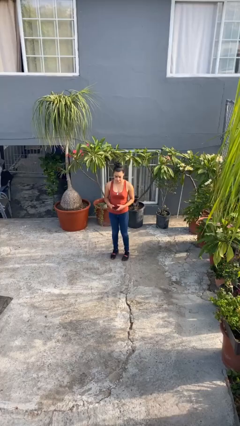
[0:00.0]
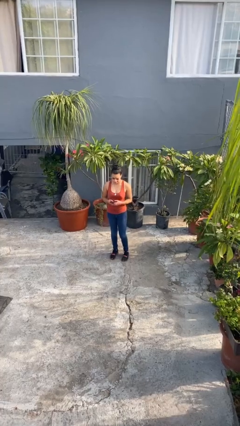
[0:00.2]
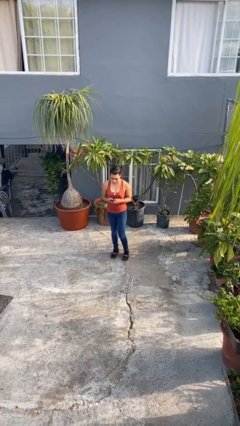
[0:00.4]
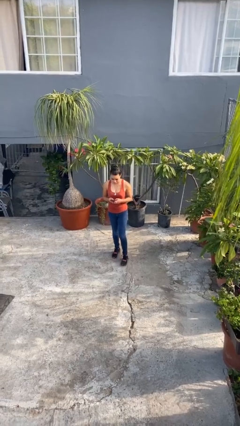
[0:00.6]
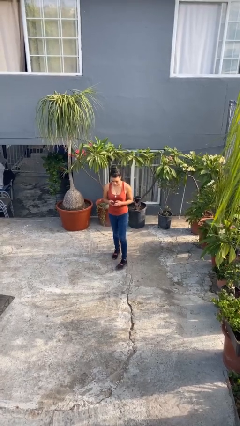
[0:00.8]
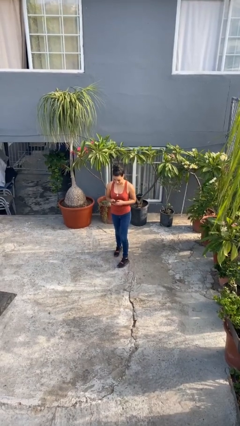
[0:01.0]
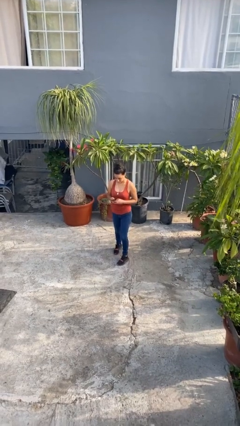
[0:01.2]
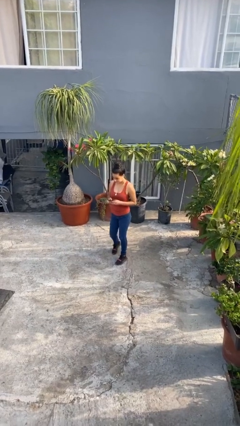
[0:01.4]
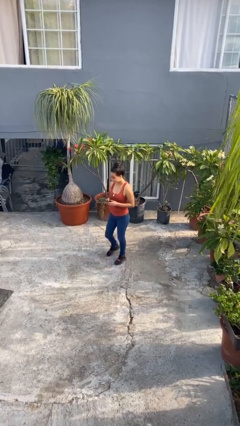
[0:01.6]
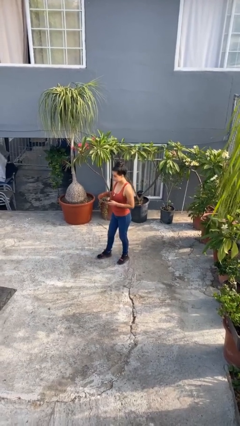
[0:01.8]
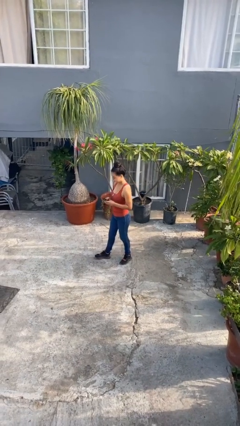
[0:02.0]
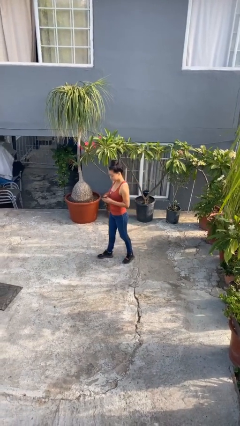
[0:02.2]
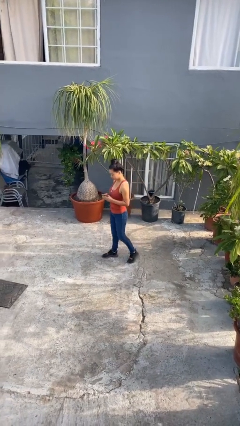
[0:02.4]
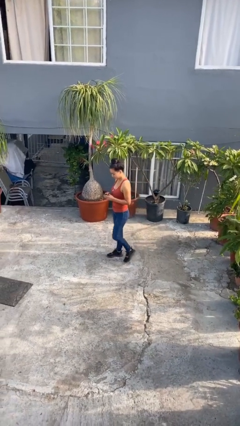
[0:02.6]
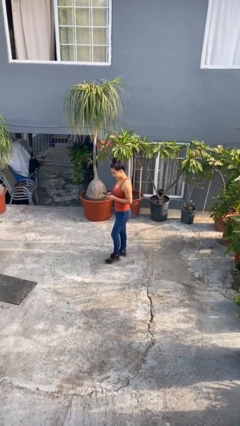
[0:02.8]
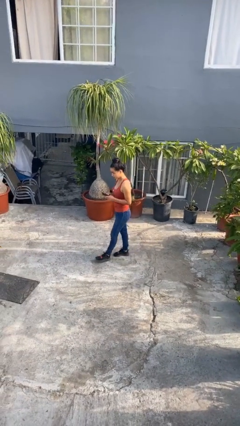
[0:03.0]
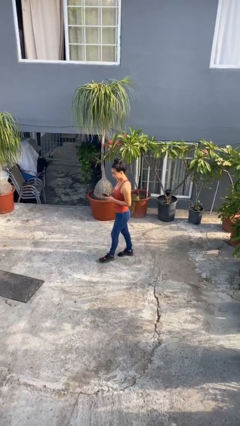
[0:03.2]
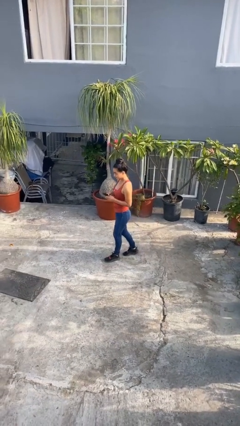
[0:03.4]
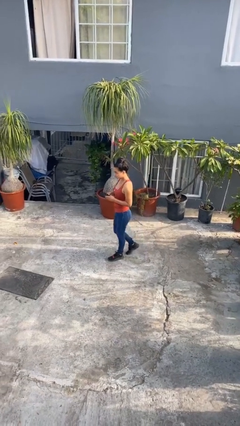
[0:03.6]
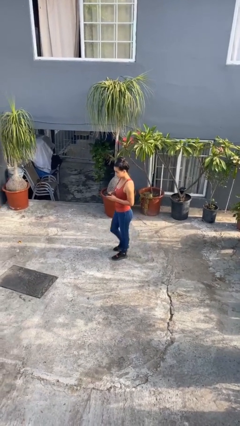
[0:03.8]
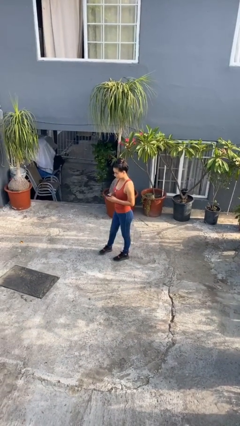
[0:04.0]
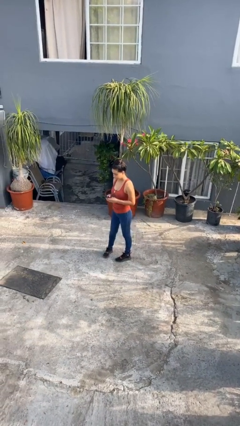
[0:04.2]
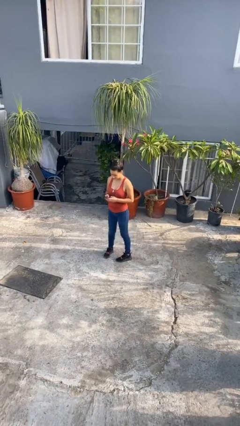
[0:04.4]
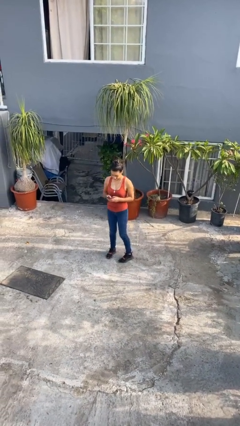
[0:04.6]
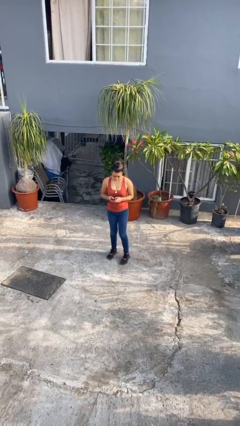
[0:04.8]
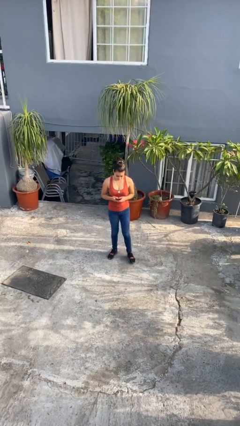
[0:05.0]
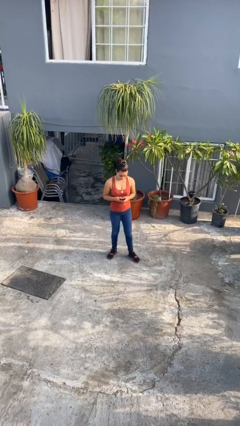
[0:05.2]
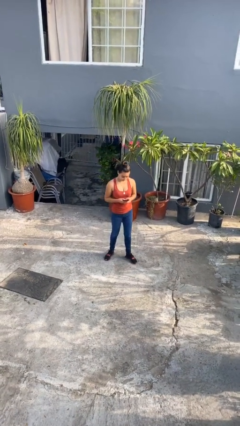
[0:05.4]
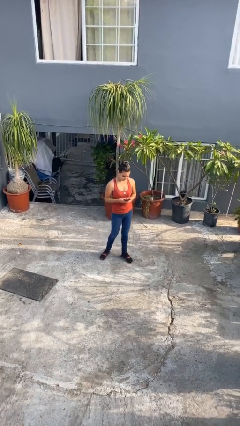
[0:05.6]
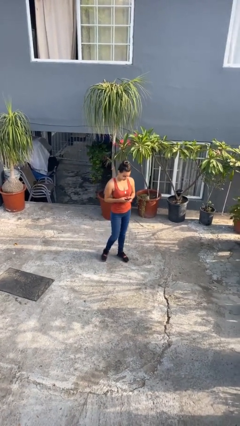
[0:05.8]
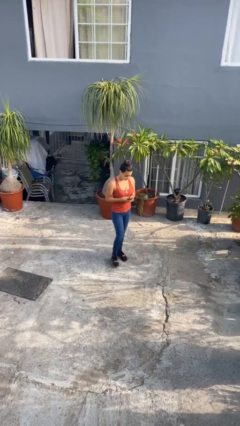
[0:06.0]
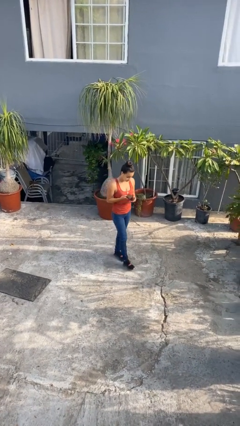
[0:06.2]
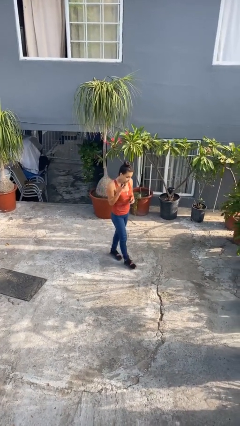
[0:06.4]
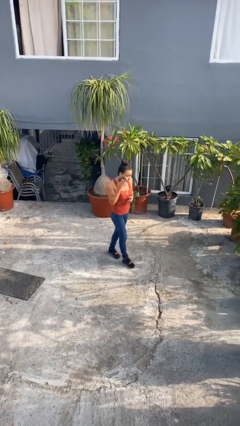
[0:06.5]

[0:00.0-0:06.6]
person texts on phone

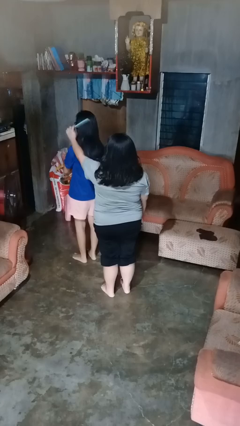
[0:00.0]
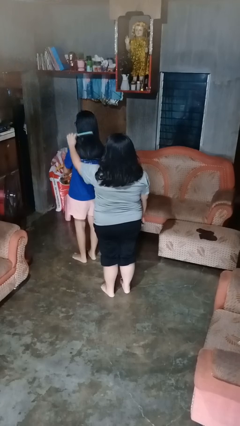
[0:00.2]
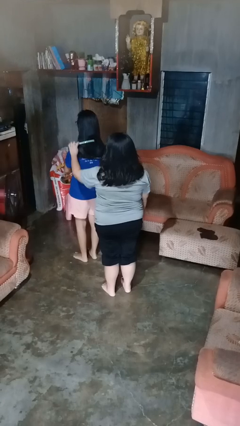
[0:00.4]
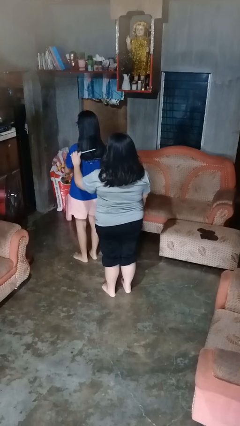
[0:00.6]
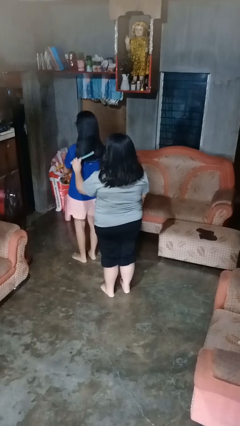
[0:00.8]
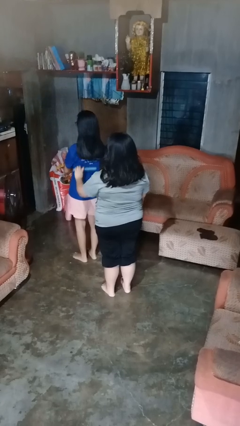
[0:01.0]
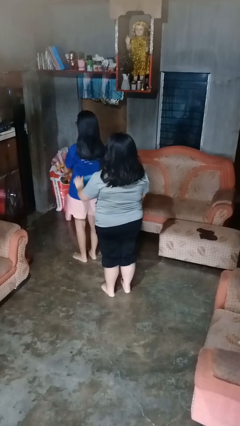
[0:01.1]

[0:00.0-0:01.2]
person brushes hair of person

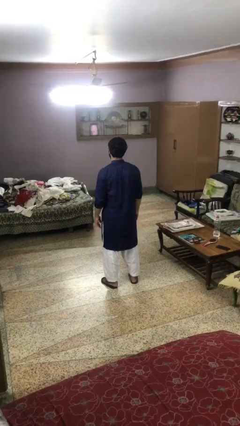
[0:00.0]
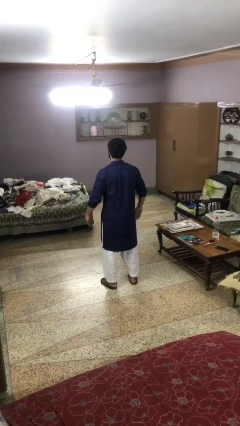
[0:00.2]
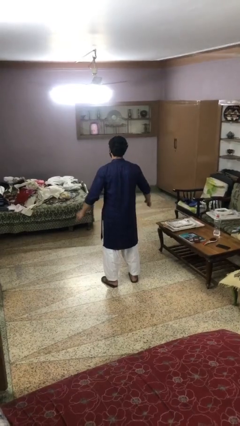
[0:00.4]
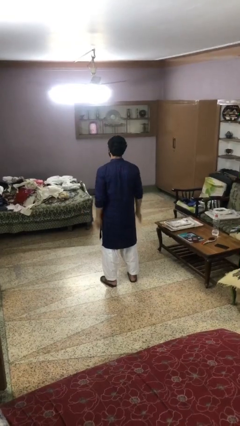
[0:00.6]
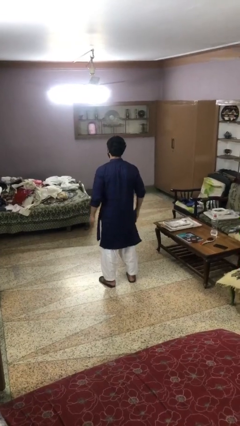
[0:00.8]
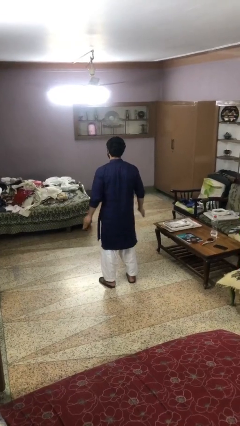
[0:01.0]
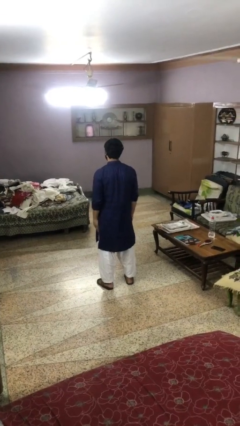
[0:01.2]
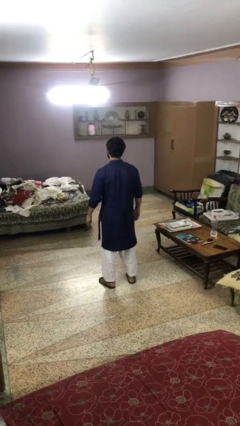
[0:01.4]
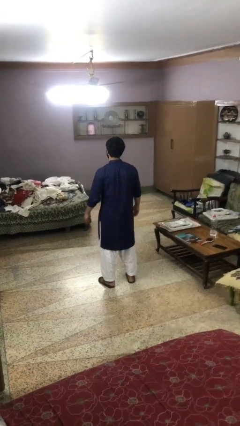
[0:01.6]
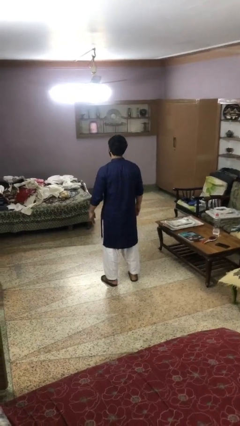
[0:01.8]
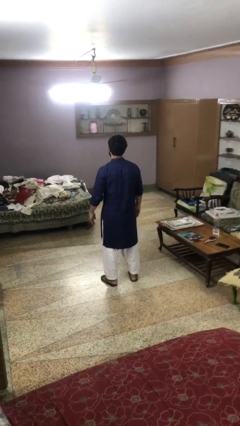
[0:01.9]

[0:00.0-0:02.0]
person slaps hands on thighs

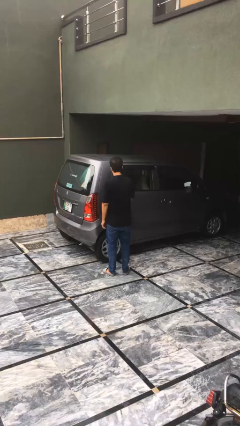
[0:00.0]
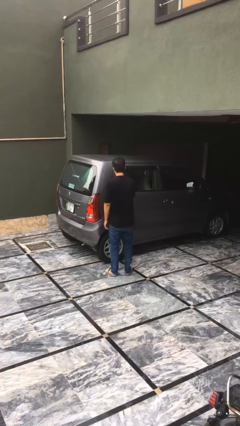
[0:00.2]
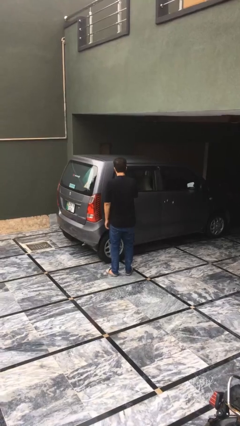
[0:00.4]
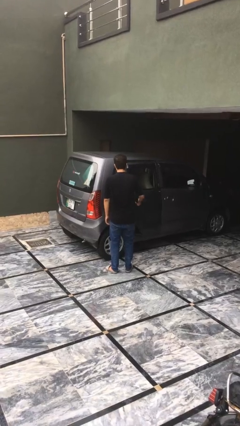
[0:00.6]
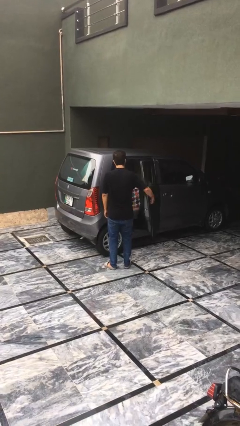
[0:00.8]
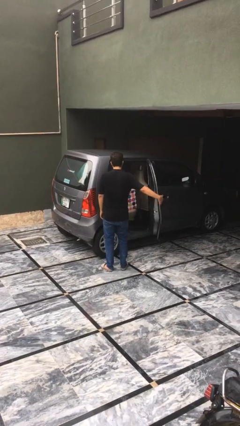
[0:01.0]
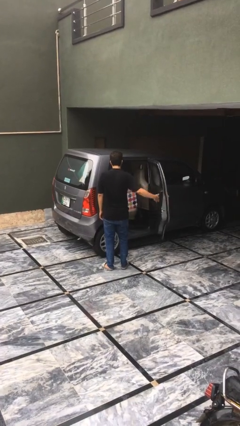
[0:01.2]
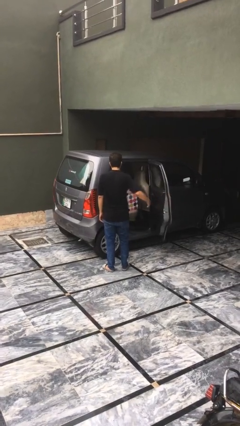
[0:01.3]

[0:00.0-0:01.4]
person opens car door

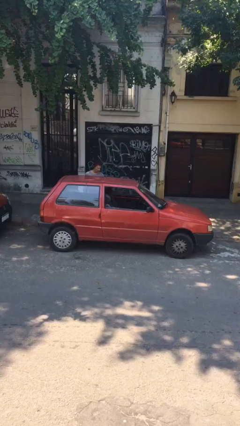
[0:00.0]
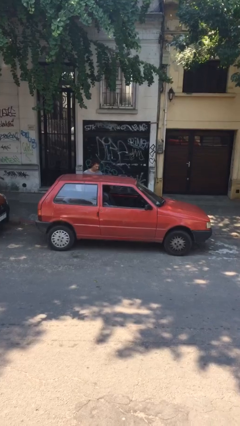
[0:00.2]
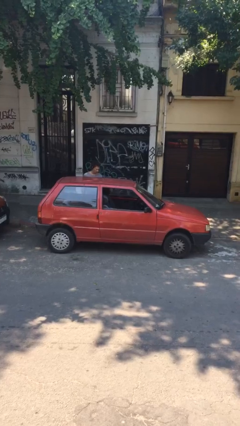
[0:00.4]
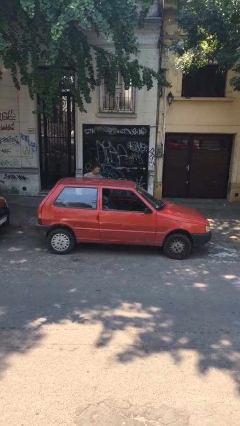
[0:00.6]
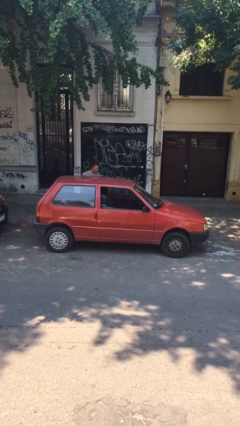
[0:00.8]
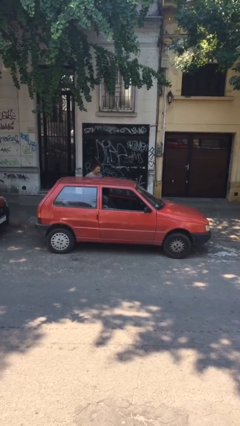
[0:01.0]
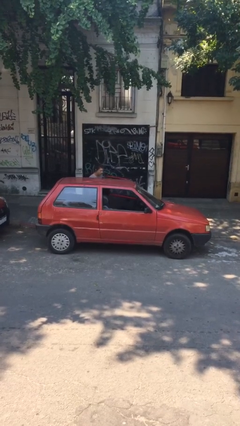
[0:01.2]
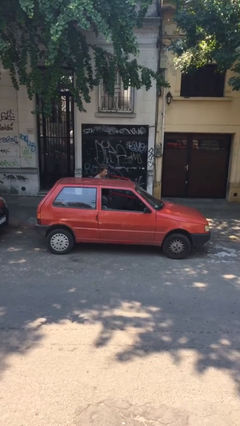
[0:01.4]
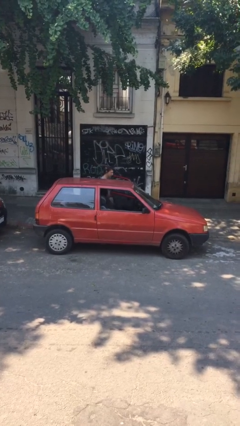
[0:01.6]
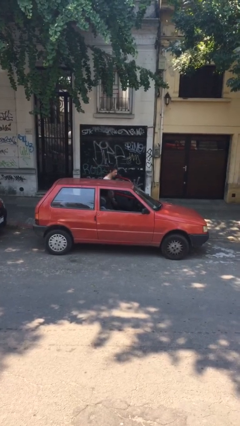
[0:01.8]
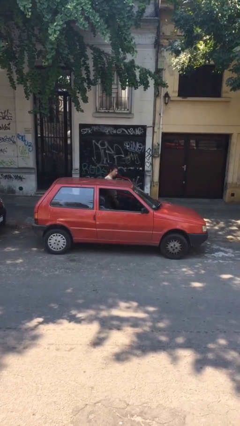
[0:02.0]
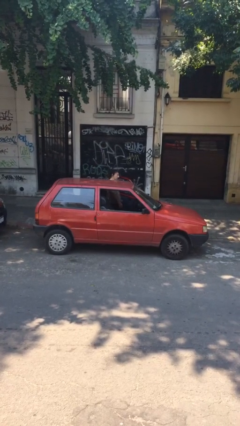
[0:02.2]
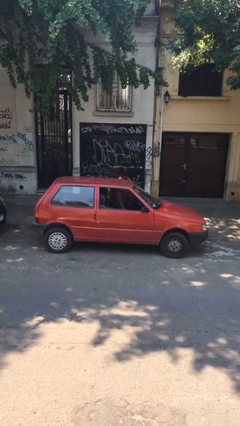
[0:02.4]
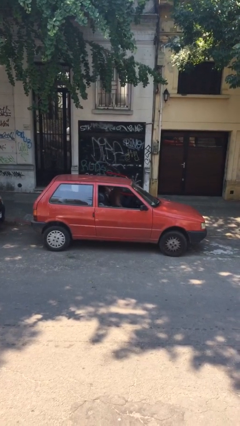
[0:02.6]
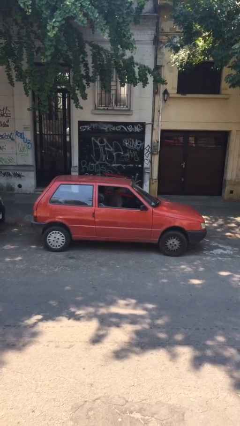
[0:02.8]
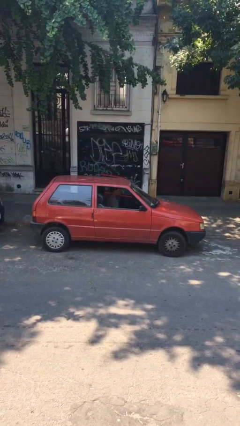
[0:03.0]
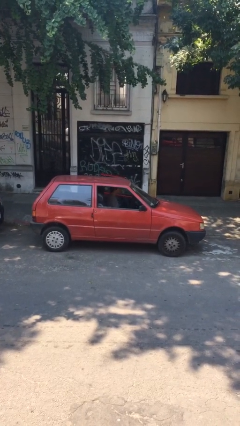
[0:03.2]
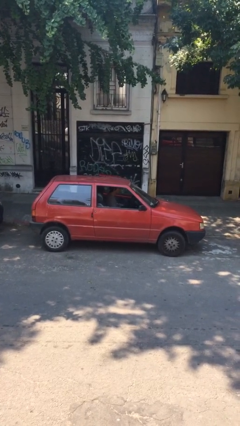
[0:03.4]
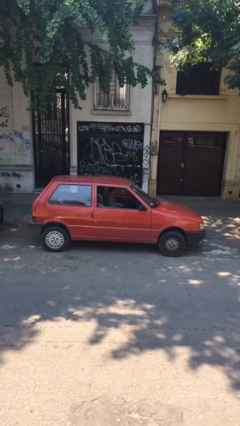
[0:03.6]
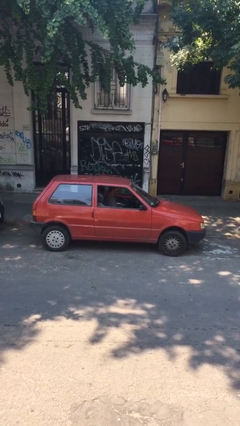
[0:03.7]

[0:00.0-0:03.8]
car picks up person

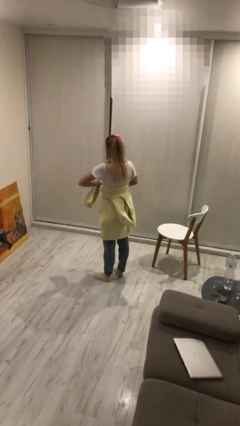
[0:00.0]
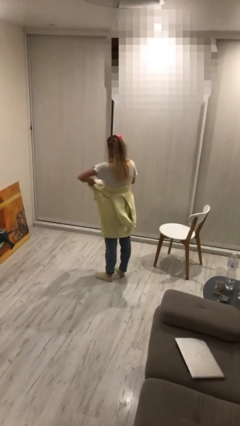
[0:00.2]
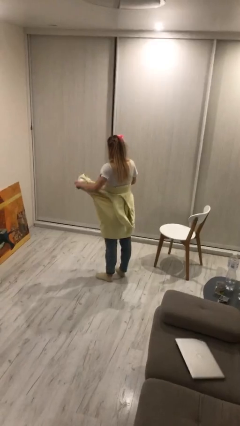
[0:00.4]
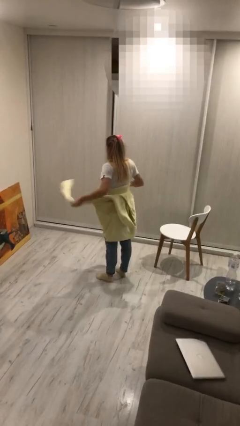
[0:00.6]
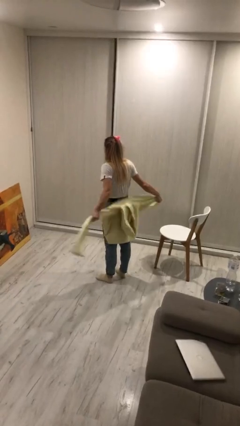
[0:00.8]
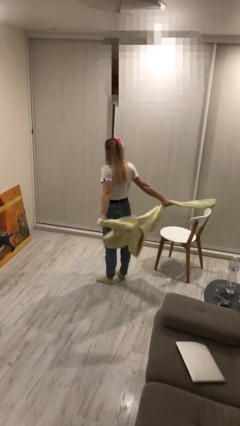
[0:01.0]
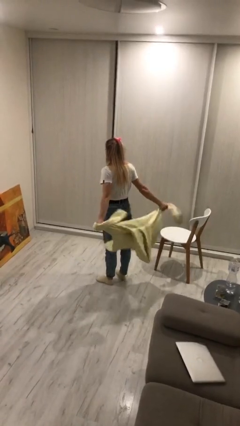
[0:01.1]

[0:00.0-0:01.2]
person unties jacket around waist

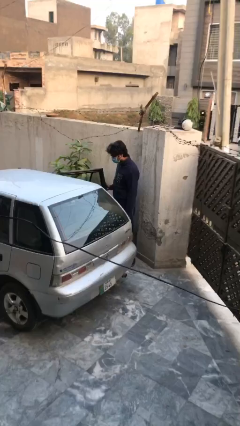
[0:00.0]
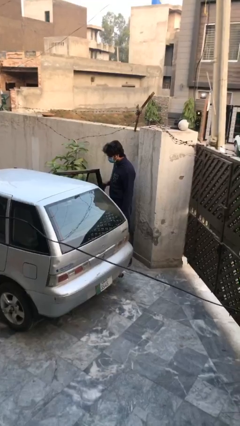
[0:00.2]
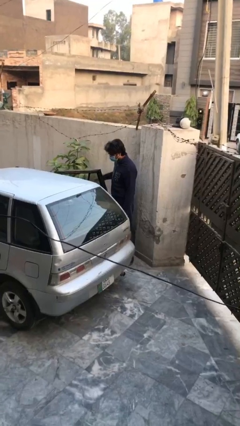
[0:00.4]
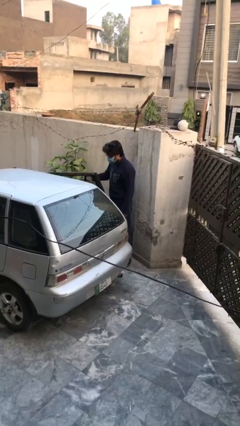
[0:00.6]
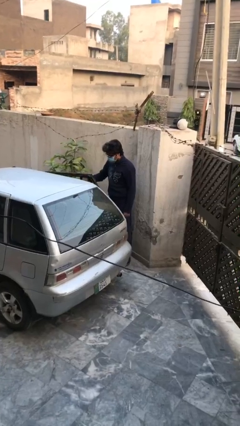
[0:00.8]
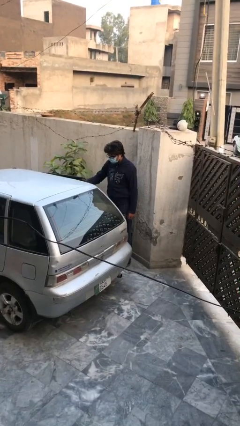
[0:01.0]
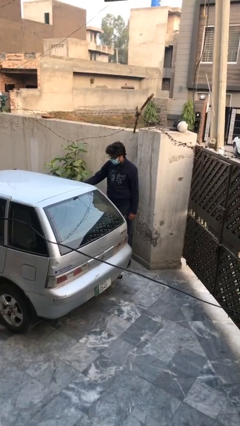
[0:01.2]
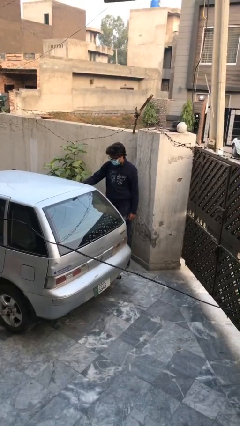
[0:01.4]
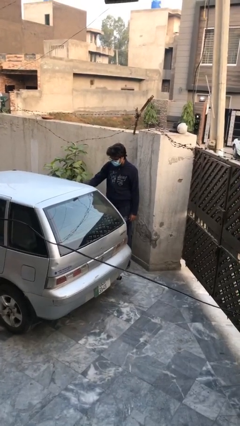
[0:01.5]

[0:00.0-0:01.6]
person closes car door
